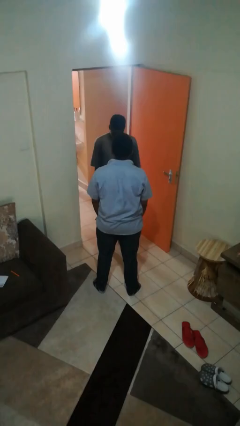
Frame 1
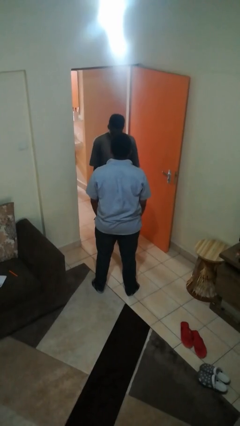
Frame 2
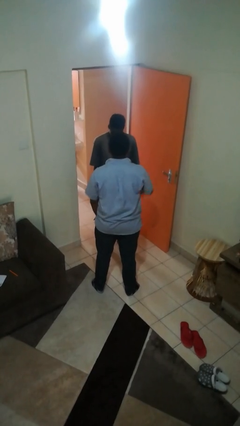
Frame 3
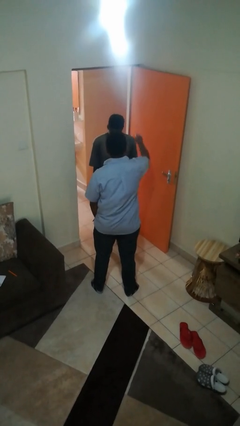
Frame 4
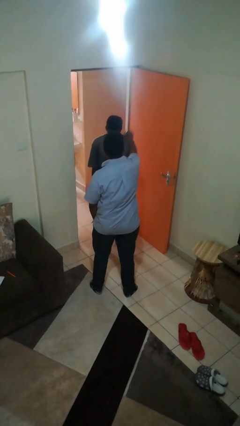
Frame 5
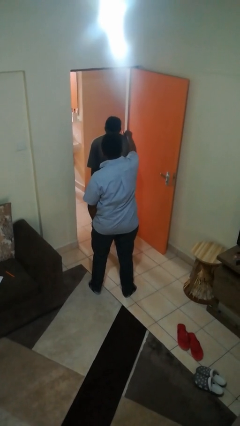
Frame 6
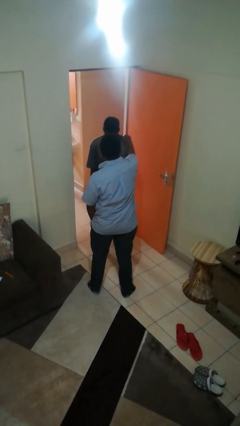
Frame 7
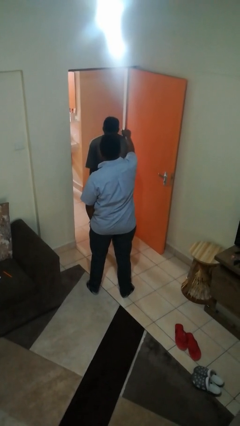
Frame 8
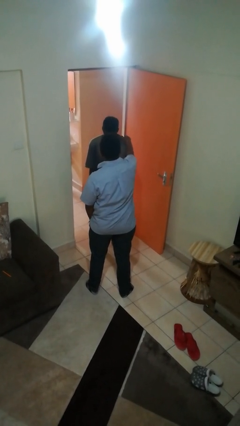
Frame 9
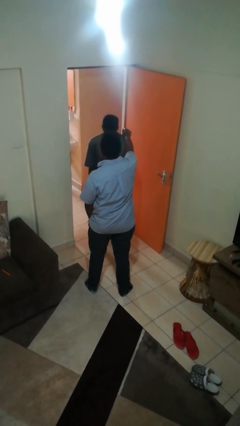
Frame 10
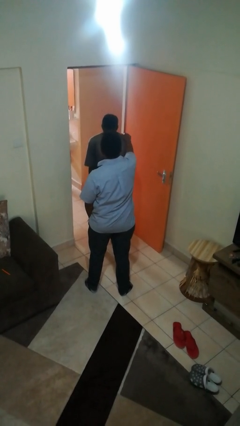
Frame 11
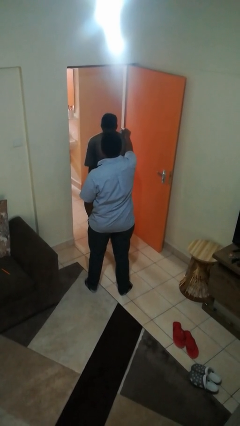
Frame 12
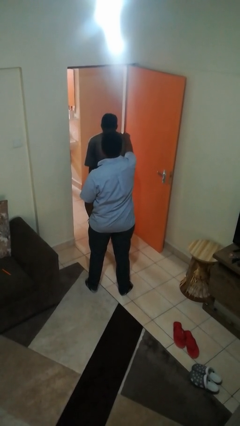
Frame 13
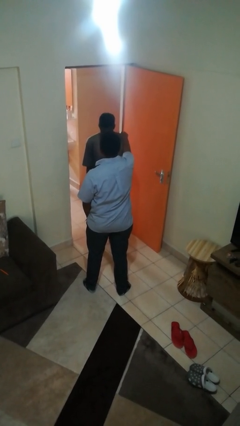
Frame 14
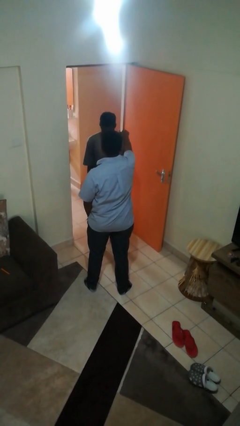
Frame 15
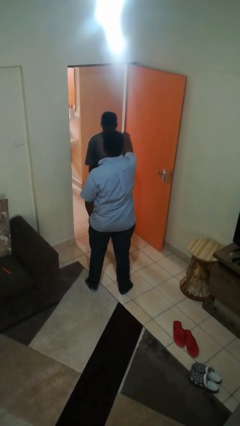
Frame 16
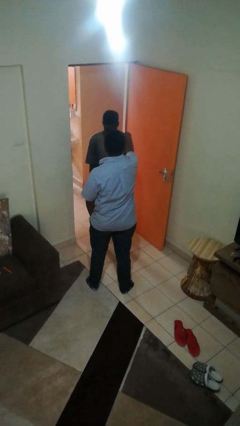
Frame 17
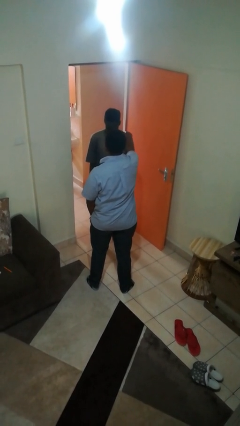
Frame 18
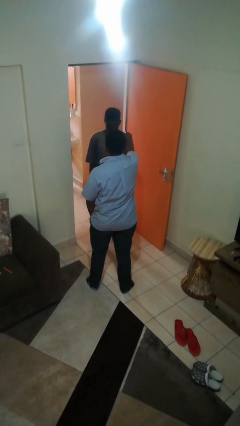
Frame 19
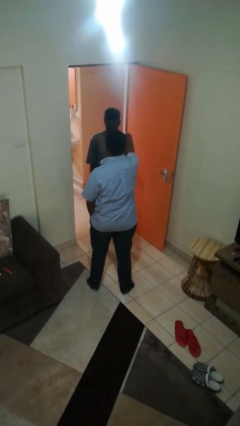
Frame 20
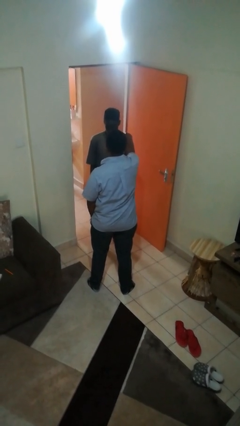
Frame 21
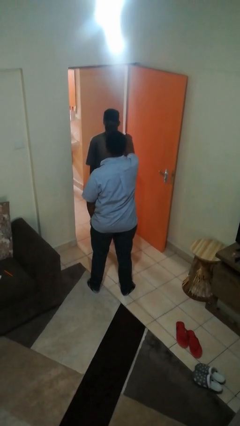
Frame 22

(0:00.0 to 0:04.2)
person pounds shoulders of person

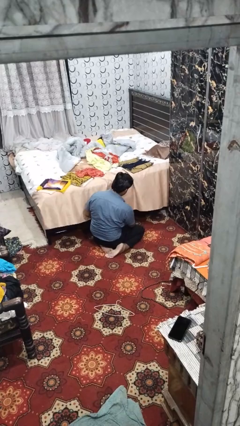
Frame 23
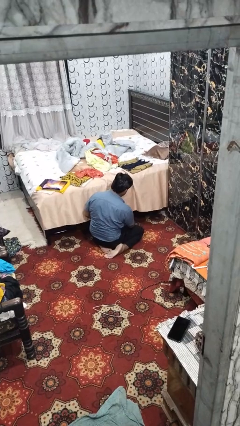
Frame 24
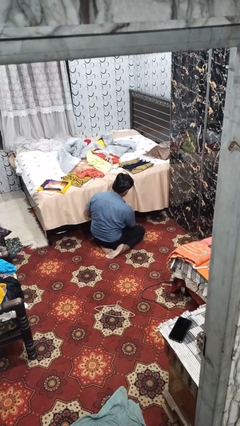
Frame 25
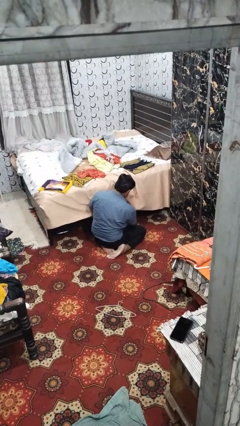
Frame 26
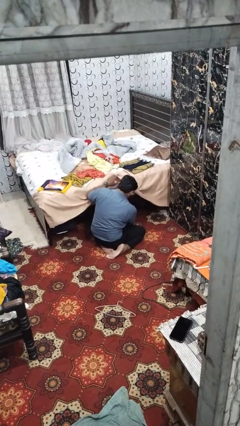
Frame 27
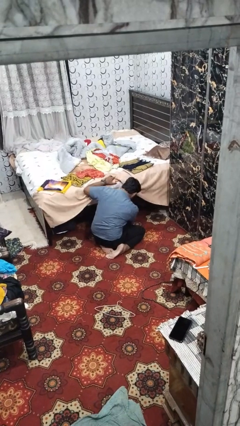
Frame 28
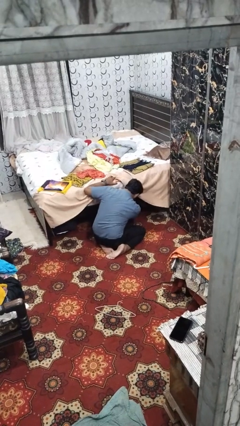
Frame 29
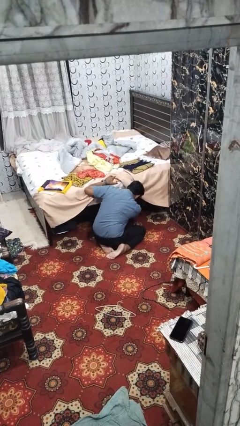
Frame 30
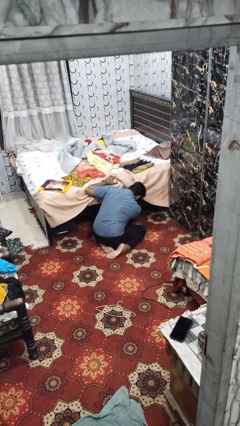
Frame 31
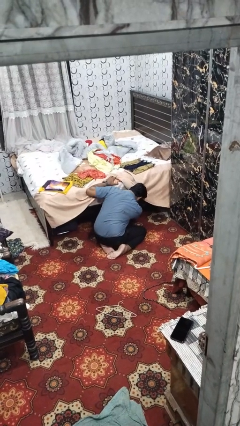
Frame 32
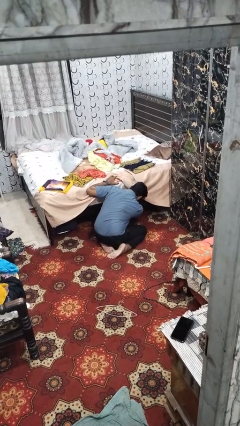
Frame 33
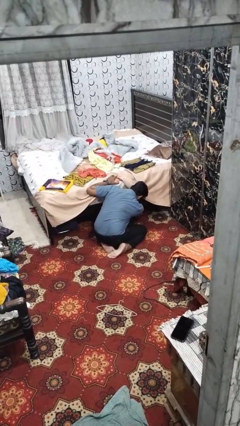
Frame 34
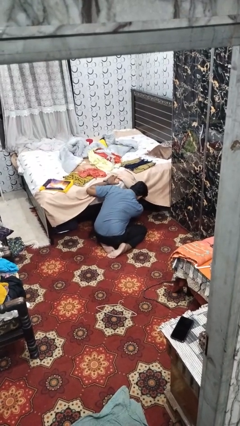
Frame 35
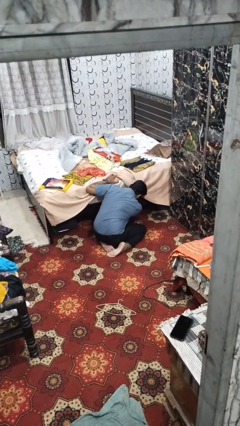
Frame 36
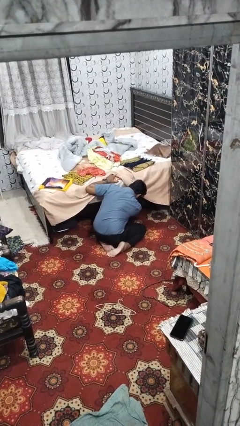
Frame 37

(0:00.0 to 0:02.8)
person searches under bed

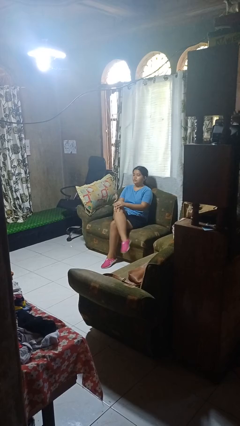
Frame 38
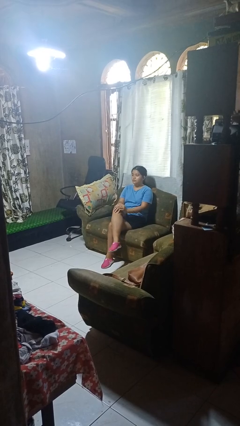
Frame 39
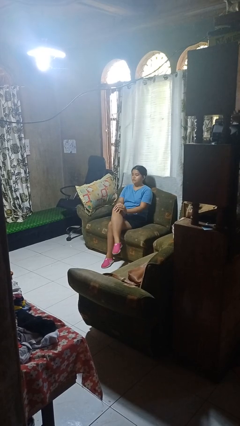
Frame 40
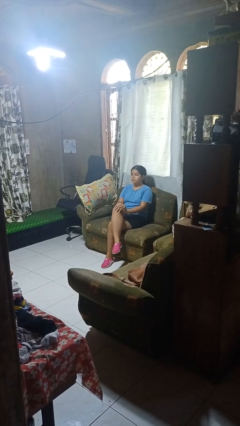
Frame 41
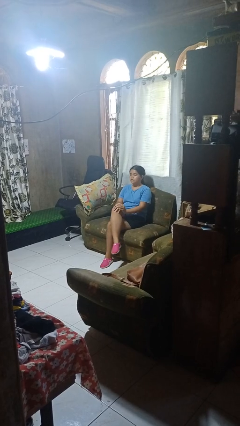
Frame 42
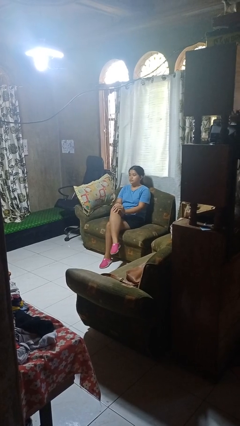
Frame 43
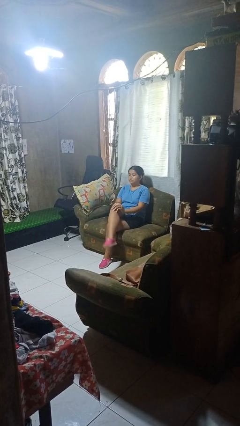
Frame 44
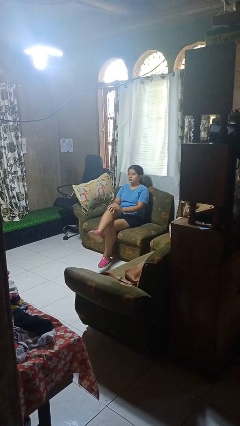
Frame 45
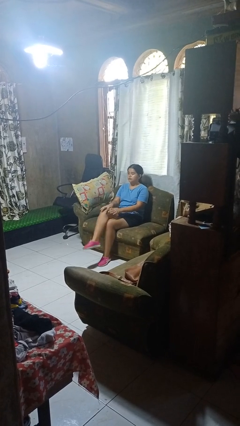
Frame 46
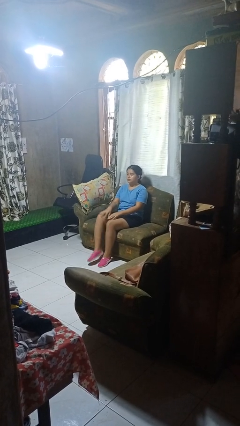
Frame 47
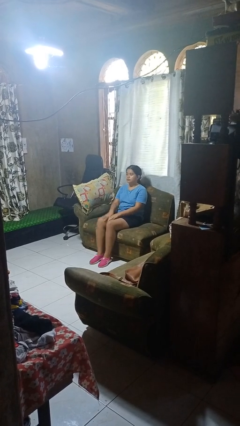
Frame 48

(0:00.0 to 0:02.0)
person crosses legs

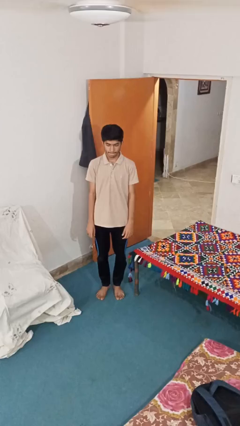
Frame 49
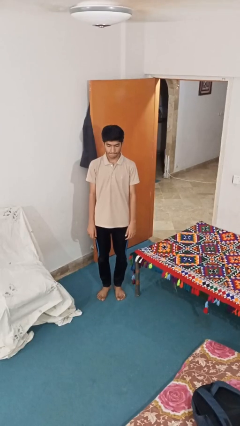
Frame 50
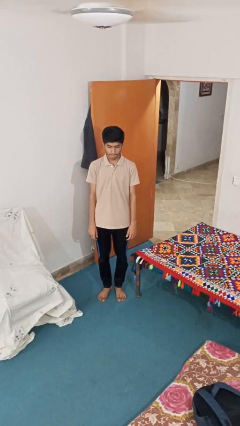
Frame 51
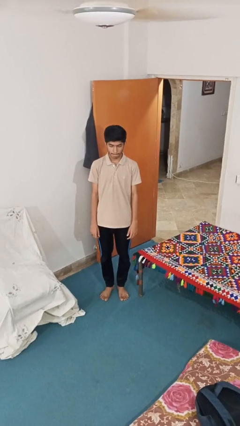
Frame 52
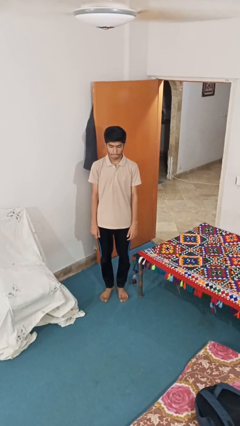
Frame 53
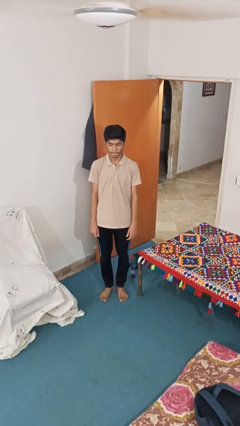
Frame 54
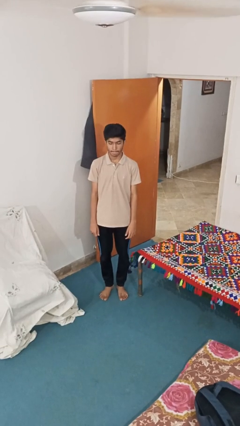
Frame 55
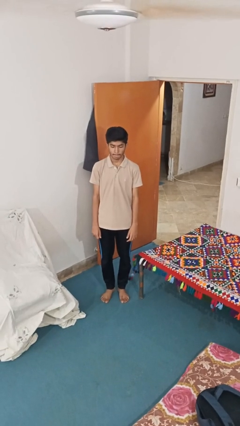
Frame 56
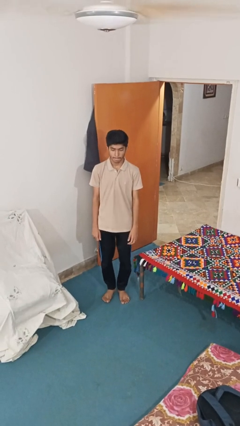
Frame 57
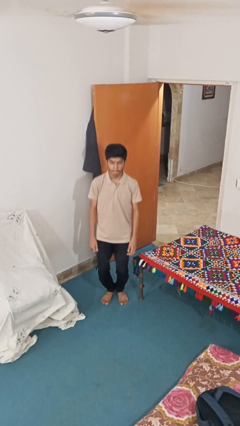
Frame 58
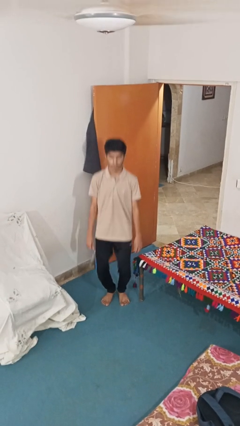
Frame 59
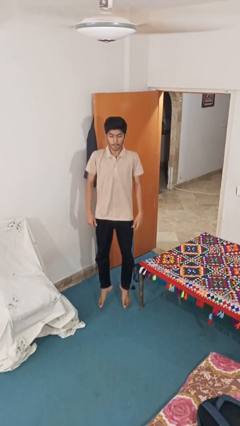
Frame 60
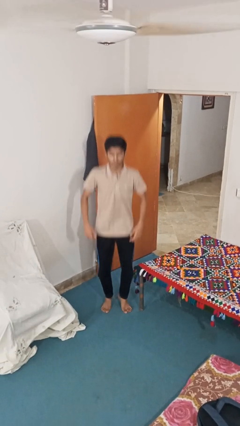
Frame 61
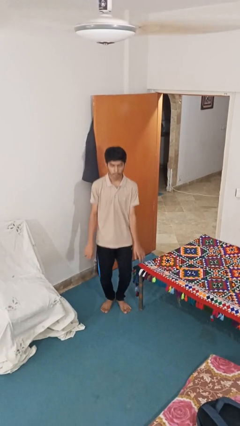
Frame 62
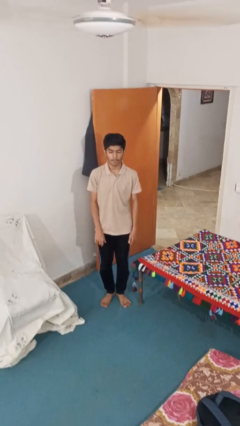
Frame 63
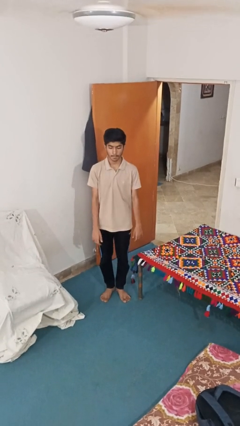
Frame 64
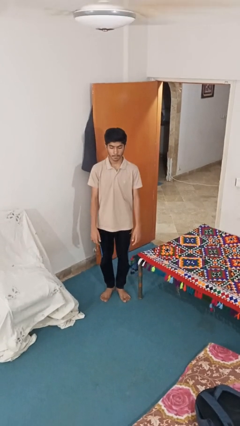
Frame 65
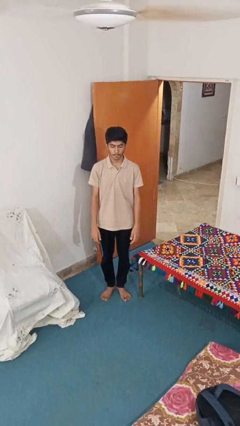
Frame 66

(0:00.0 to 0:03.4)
person jumps

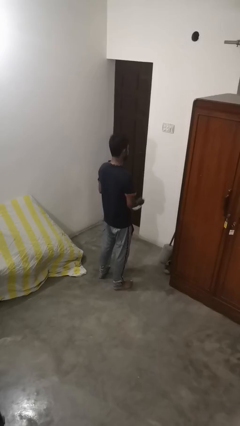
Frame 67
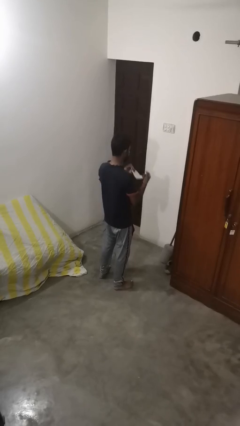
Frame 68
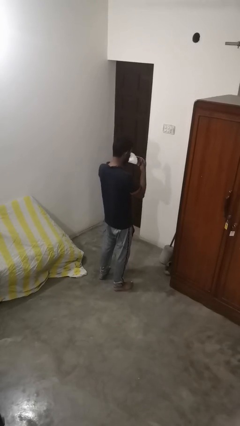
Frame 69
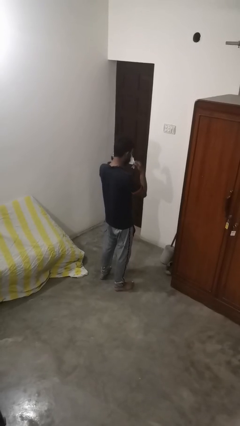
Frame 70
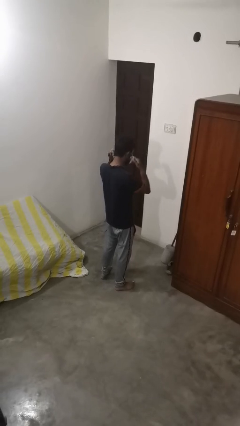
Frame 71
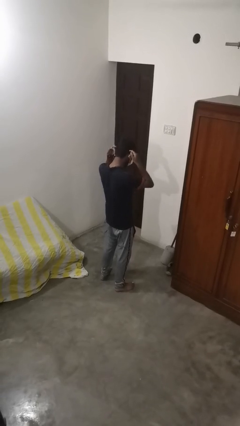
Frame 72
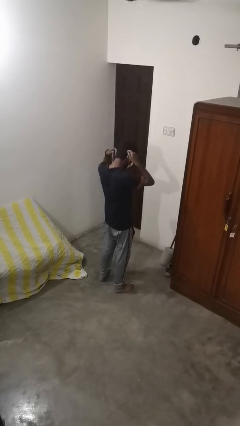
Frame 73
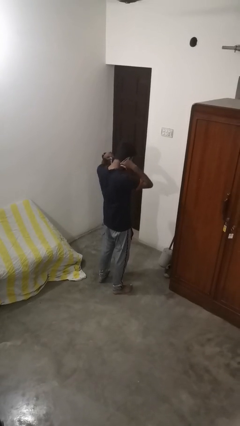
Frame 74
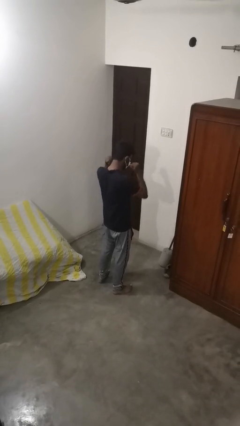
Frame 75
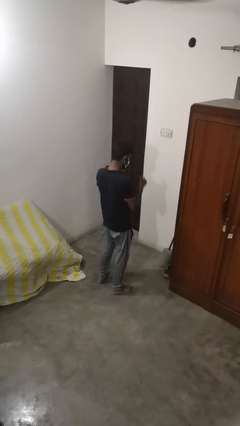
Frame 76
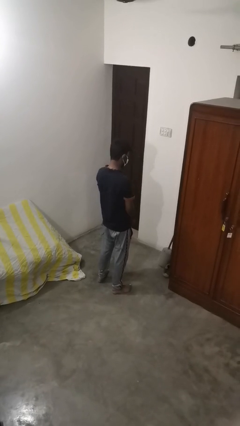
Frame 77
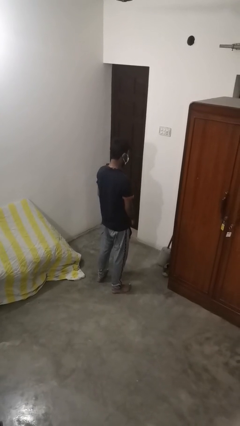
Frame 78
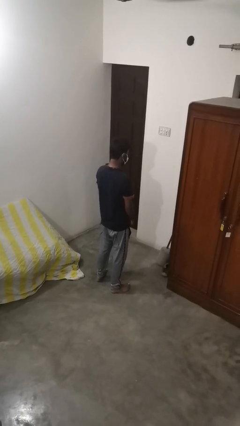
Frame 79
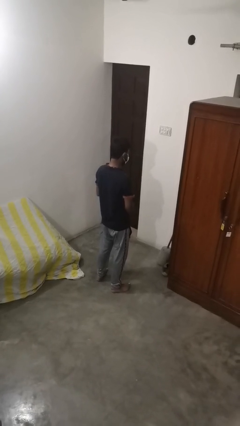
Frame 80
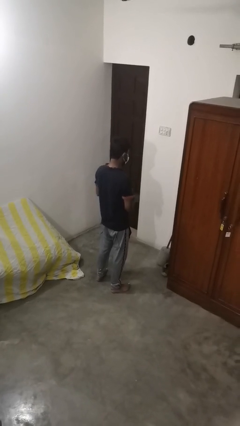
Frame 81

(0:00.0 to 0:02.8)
person puts on facemask

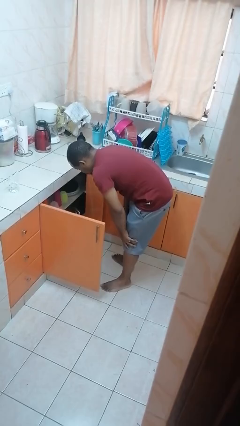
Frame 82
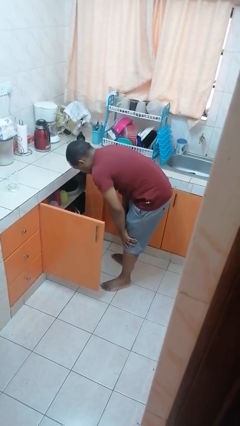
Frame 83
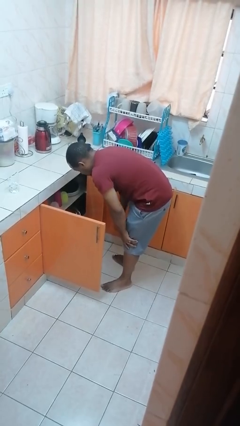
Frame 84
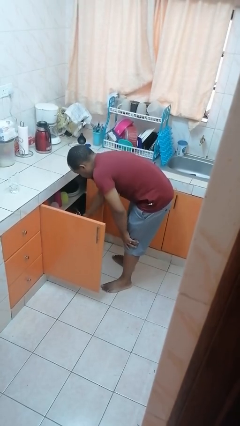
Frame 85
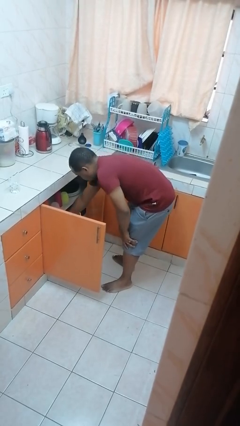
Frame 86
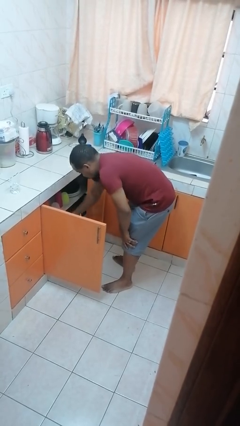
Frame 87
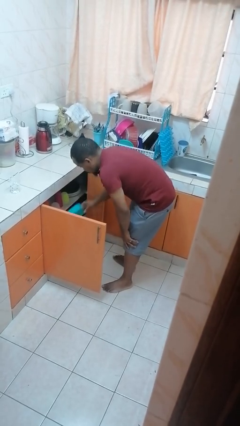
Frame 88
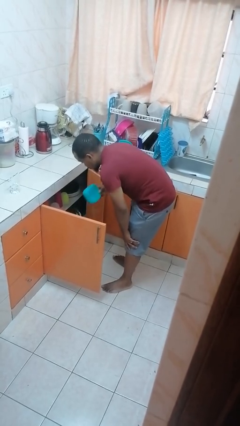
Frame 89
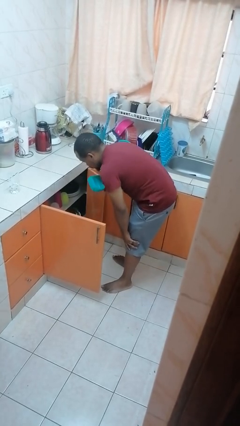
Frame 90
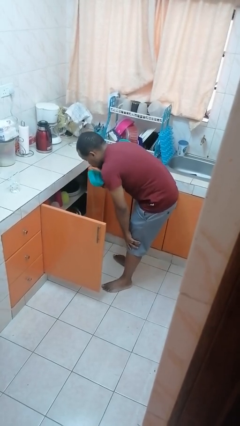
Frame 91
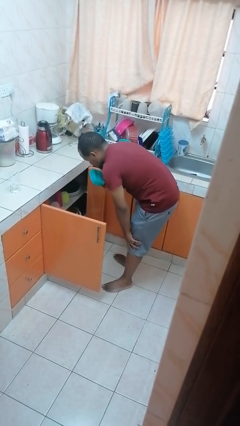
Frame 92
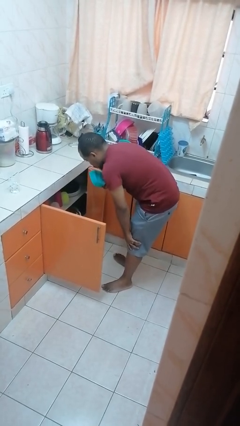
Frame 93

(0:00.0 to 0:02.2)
person takes object from cabinet

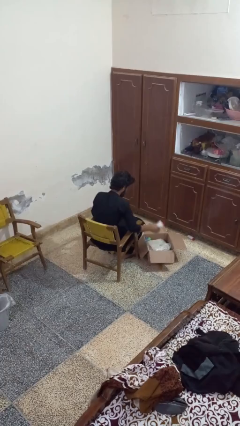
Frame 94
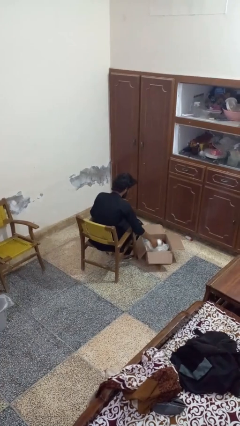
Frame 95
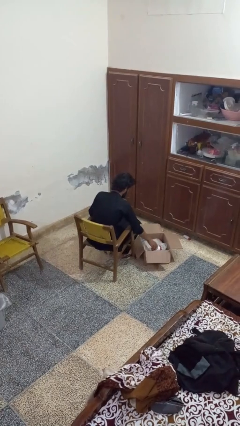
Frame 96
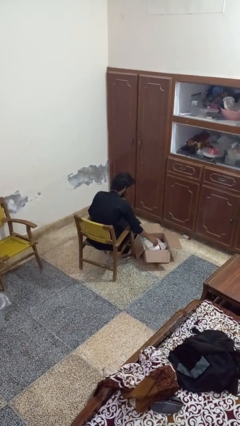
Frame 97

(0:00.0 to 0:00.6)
person puts object into box
